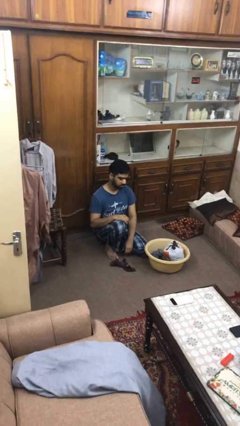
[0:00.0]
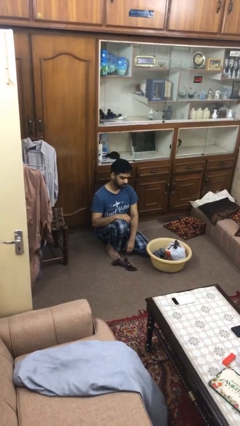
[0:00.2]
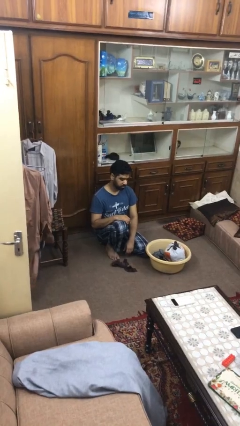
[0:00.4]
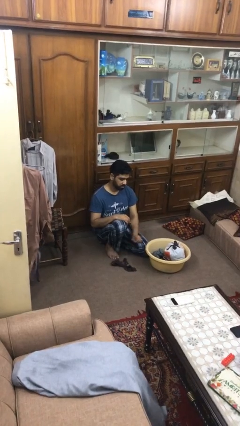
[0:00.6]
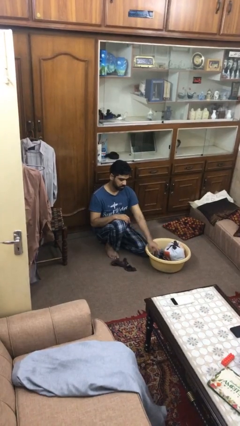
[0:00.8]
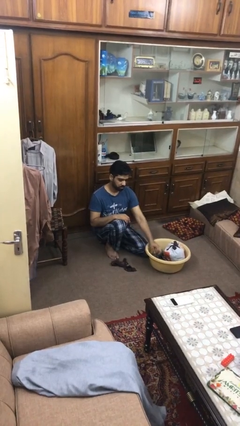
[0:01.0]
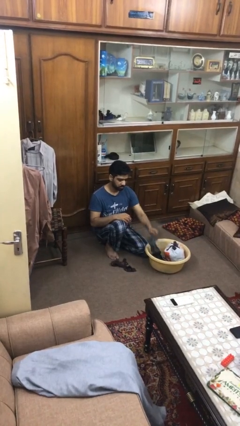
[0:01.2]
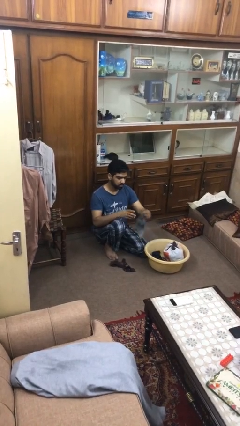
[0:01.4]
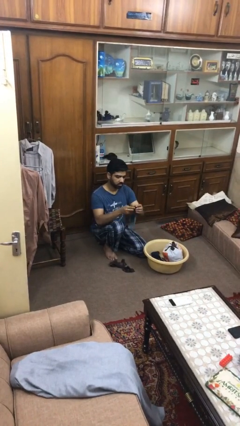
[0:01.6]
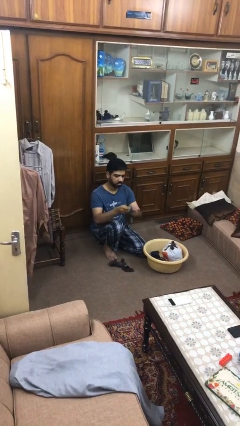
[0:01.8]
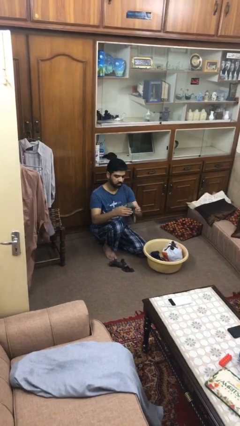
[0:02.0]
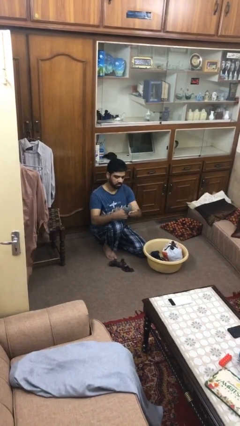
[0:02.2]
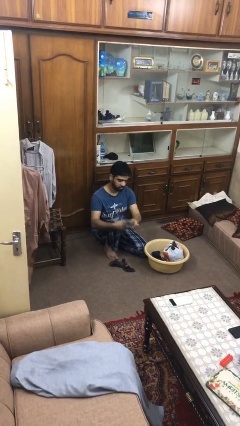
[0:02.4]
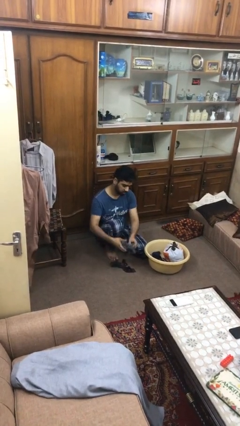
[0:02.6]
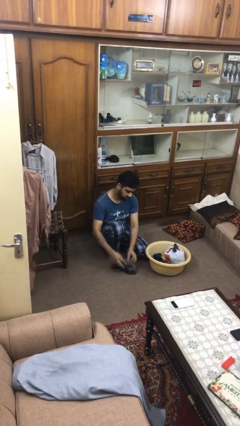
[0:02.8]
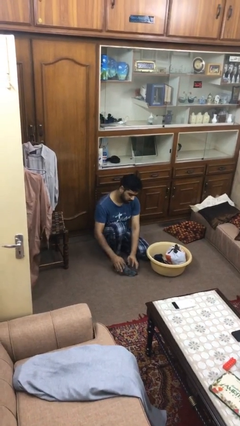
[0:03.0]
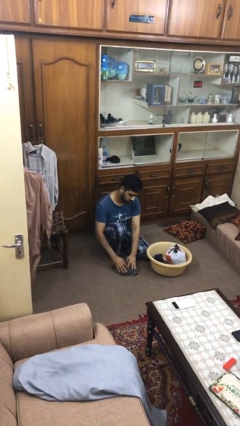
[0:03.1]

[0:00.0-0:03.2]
person folds socks

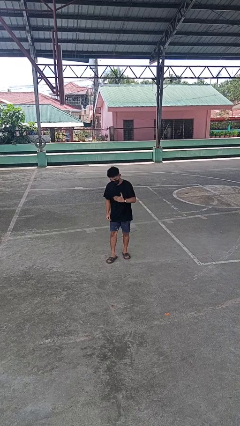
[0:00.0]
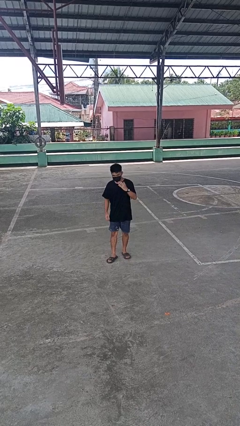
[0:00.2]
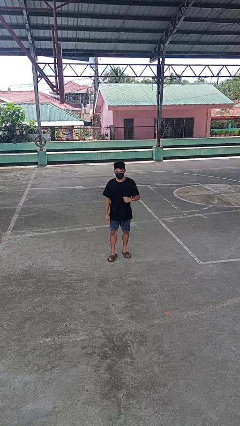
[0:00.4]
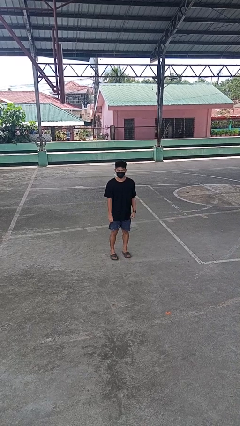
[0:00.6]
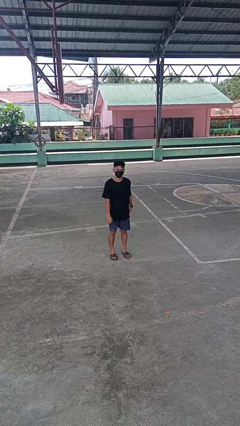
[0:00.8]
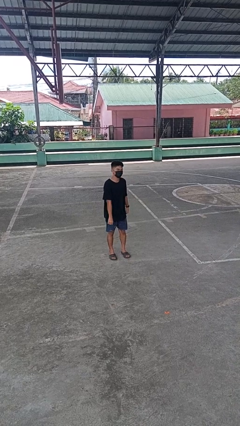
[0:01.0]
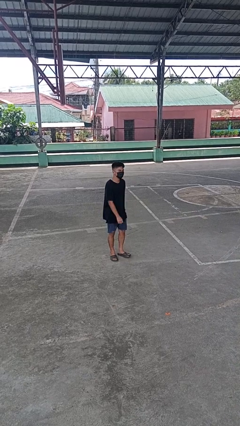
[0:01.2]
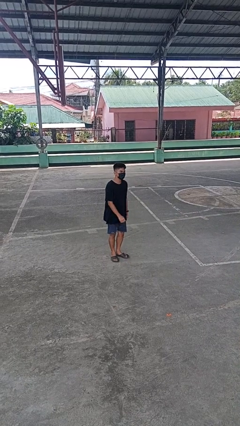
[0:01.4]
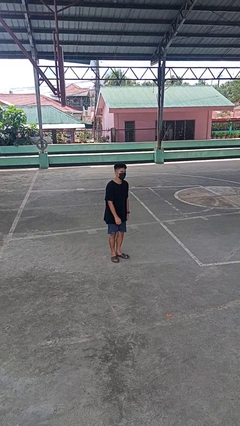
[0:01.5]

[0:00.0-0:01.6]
person karate chop

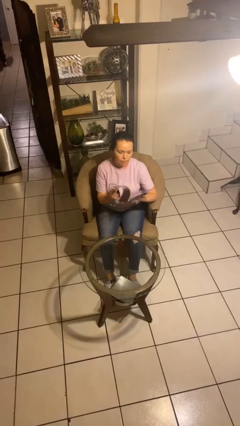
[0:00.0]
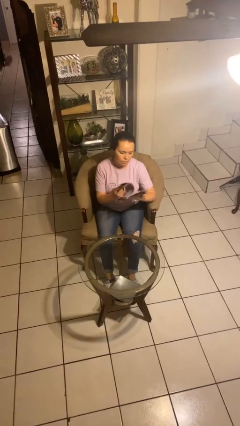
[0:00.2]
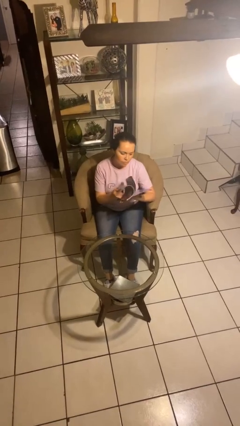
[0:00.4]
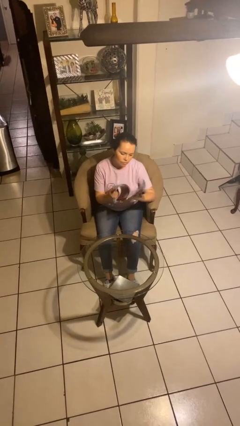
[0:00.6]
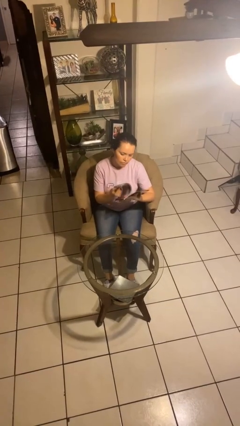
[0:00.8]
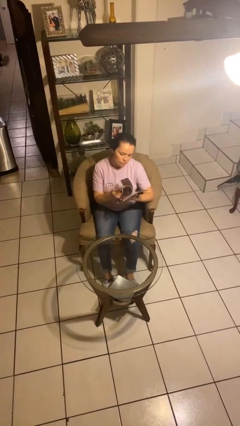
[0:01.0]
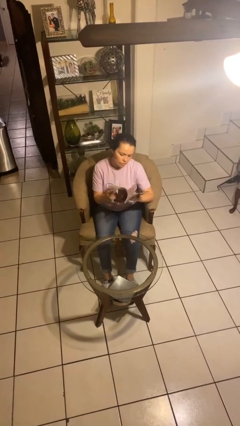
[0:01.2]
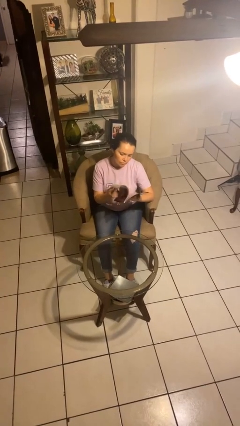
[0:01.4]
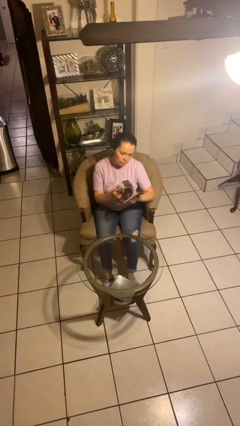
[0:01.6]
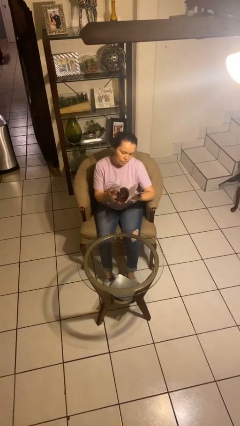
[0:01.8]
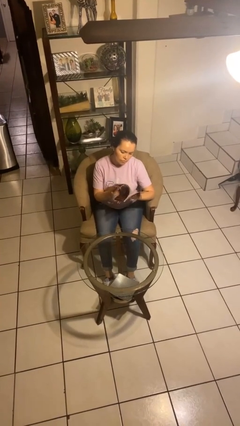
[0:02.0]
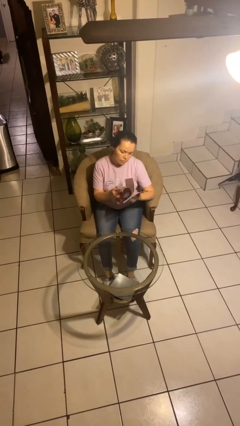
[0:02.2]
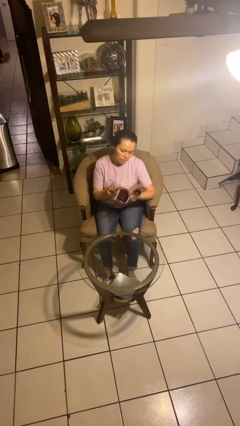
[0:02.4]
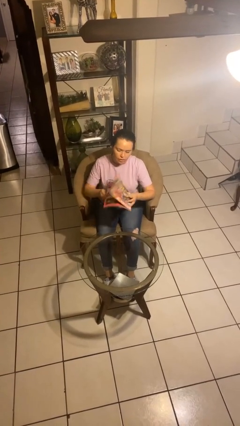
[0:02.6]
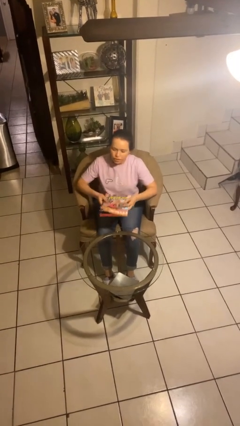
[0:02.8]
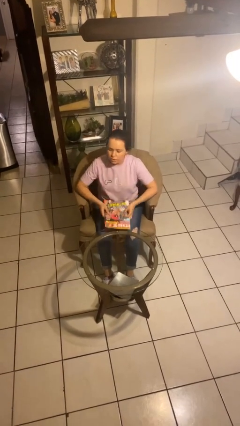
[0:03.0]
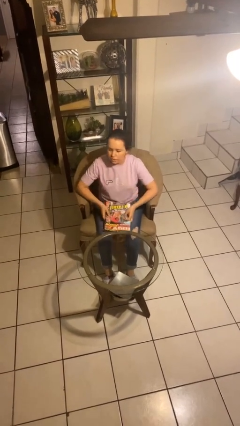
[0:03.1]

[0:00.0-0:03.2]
person reads magazine

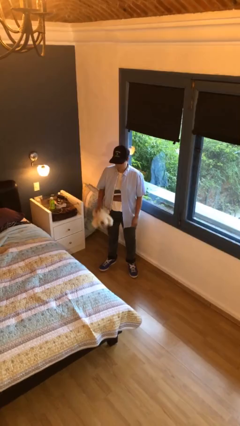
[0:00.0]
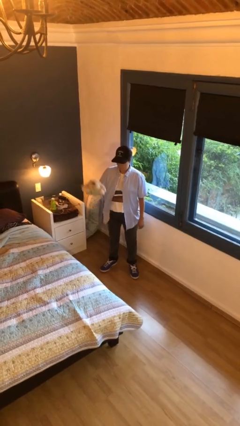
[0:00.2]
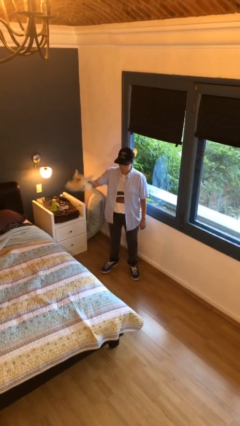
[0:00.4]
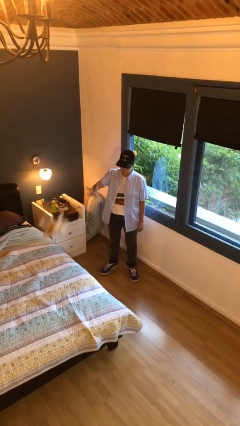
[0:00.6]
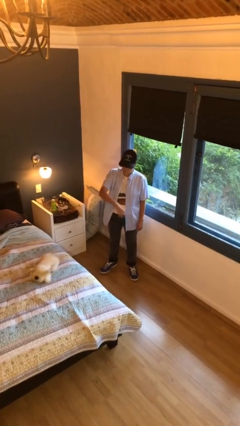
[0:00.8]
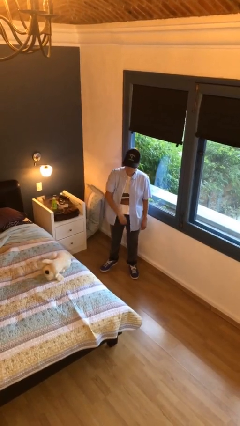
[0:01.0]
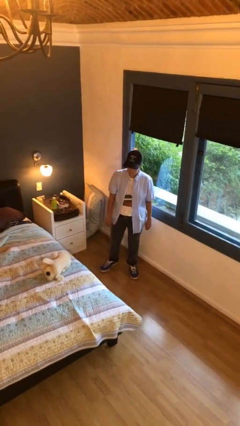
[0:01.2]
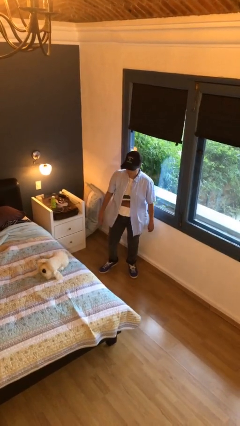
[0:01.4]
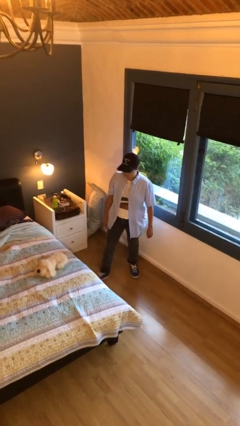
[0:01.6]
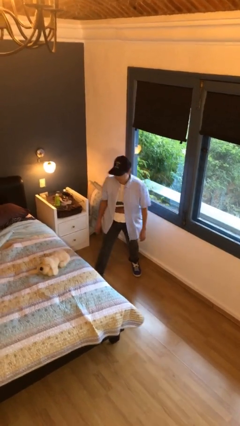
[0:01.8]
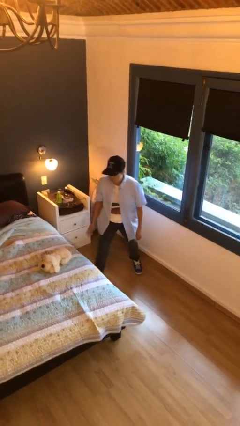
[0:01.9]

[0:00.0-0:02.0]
person throws object on bed

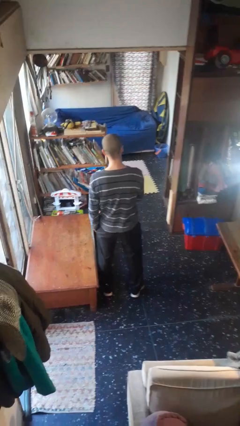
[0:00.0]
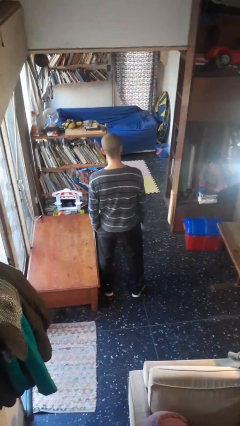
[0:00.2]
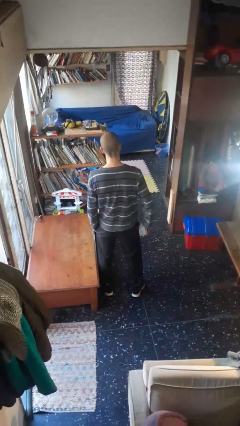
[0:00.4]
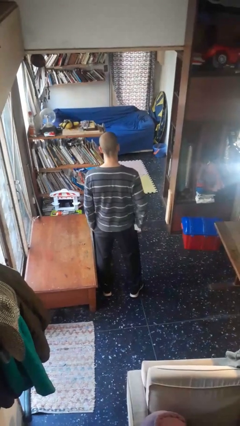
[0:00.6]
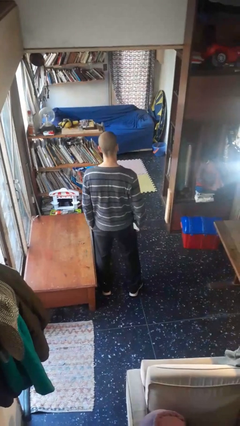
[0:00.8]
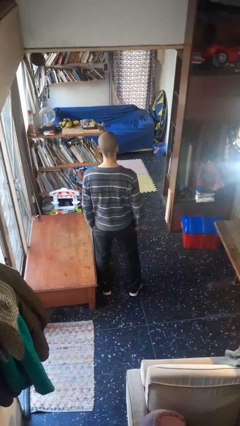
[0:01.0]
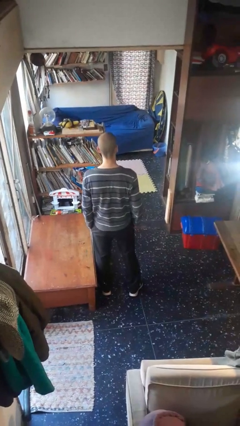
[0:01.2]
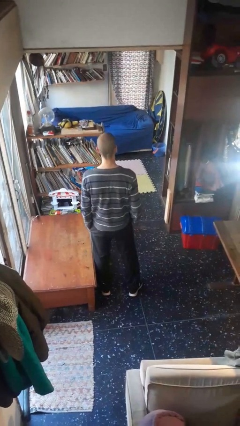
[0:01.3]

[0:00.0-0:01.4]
person puts phone into pocket

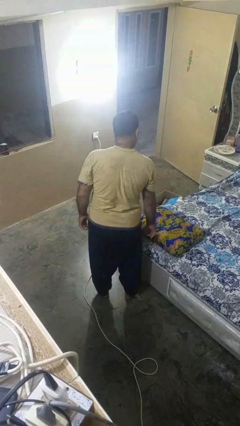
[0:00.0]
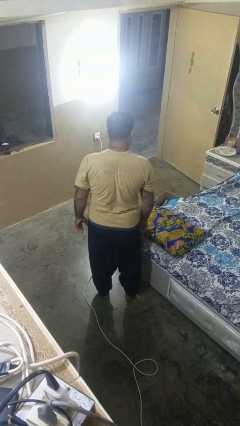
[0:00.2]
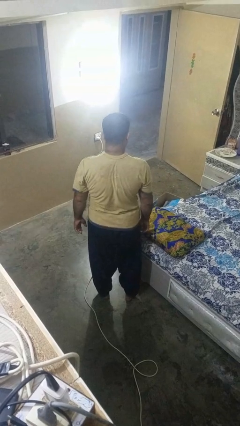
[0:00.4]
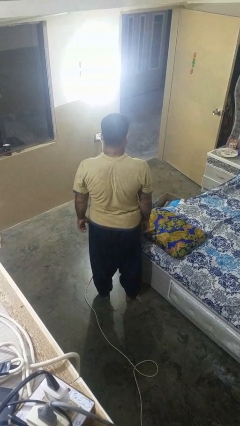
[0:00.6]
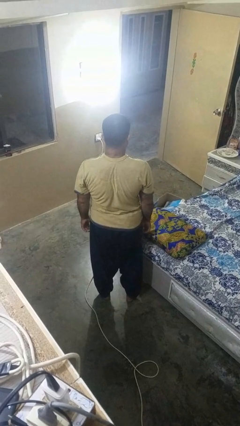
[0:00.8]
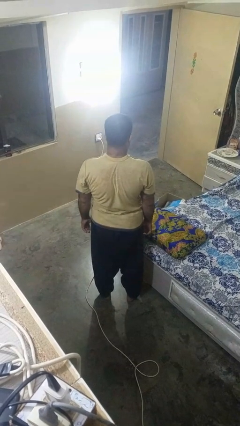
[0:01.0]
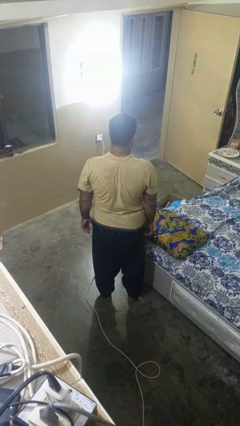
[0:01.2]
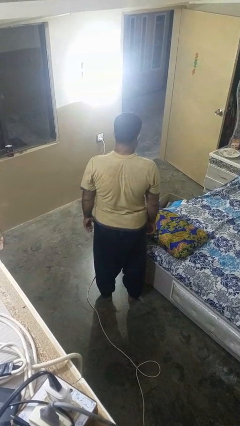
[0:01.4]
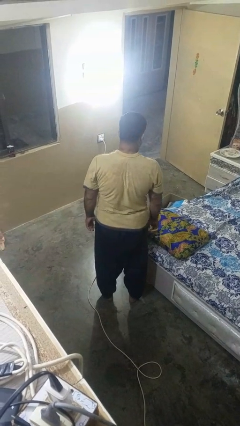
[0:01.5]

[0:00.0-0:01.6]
person taps object with finger

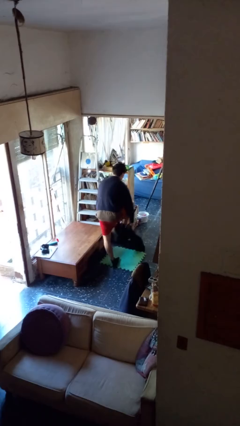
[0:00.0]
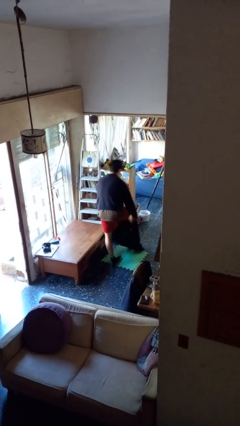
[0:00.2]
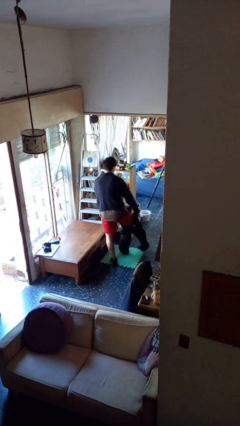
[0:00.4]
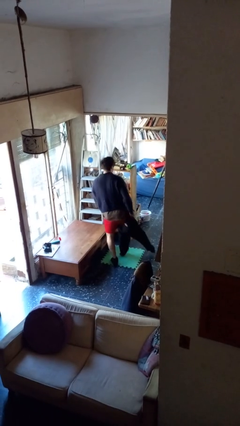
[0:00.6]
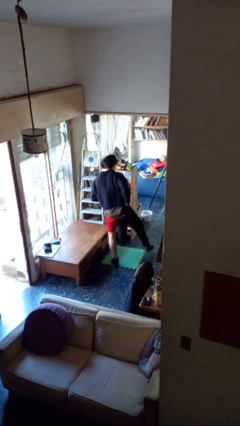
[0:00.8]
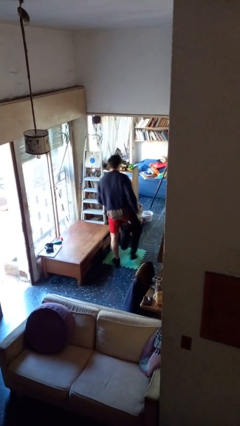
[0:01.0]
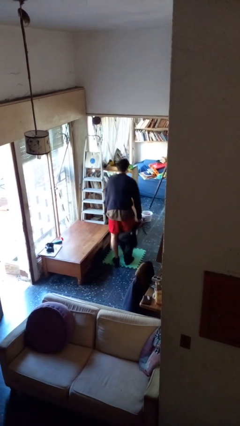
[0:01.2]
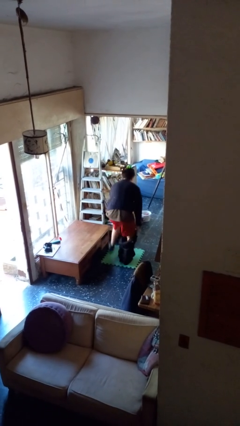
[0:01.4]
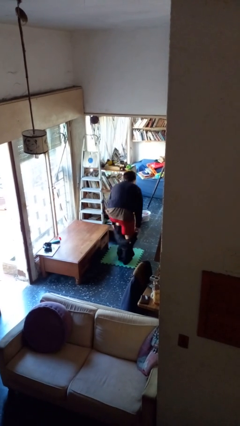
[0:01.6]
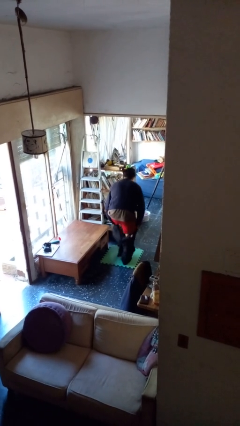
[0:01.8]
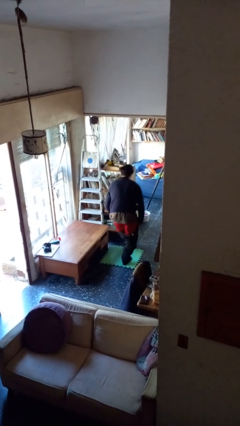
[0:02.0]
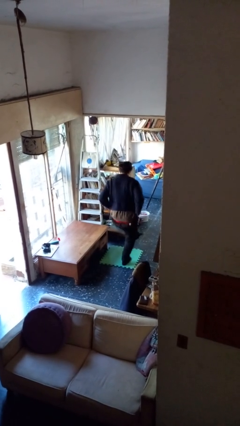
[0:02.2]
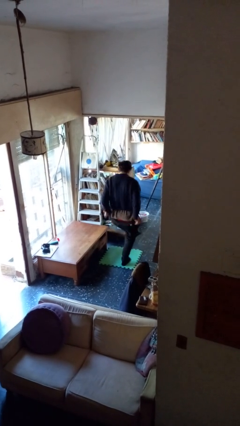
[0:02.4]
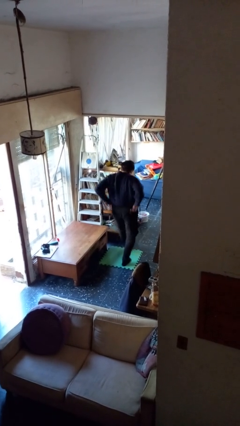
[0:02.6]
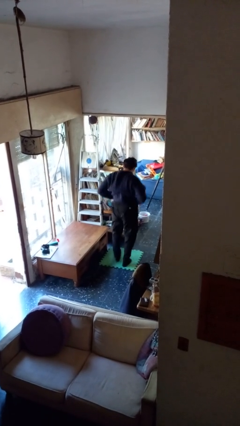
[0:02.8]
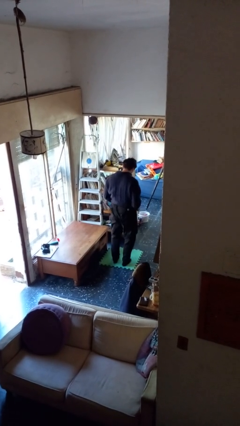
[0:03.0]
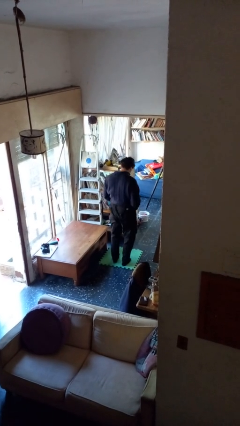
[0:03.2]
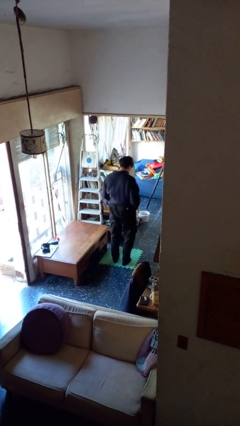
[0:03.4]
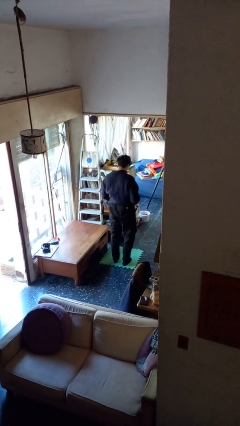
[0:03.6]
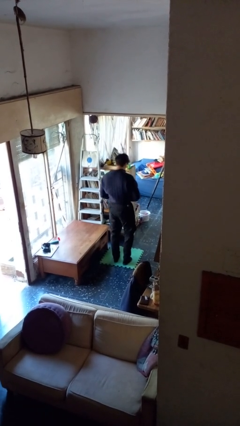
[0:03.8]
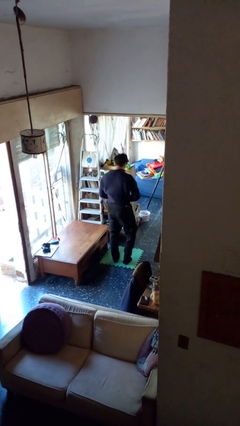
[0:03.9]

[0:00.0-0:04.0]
person puts on pants
